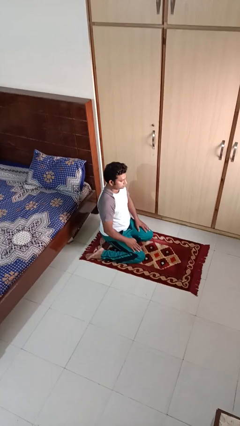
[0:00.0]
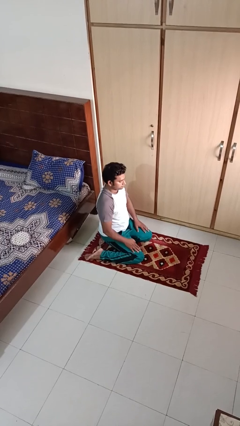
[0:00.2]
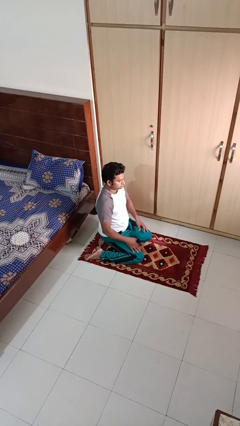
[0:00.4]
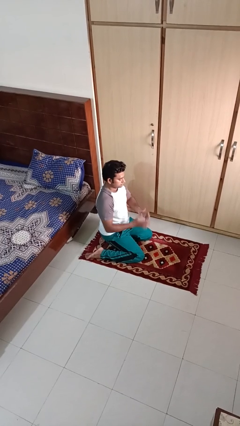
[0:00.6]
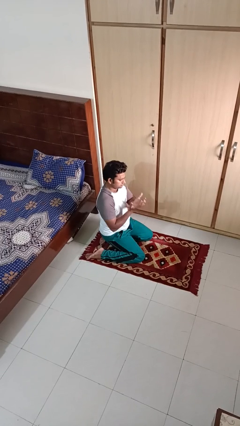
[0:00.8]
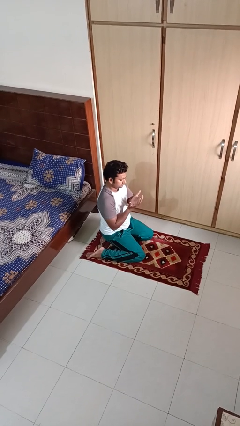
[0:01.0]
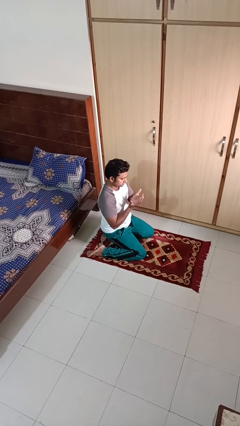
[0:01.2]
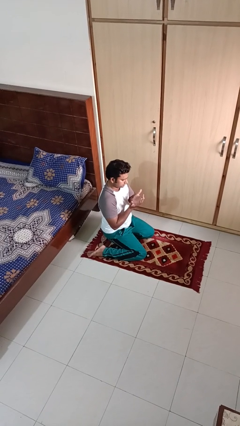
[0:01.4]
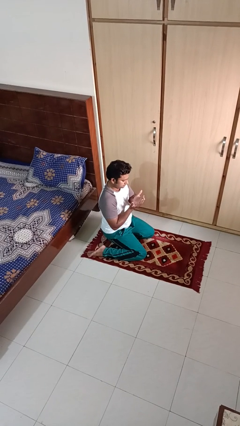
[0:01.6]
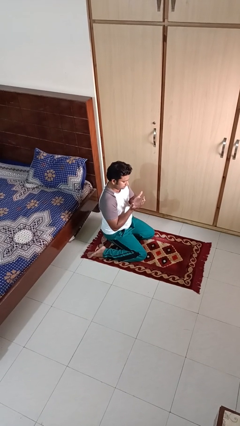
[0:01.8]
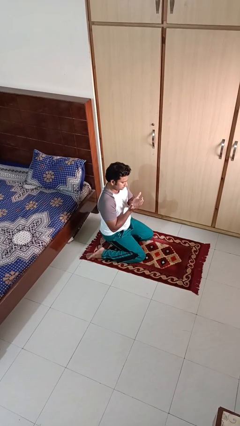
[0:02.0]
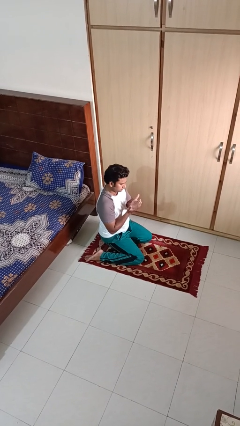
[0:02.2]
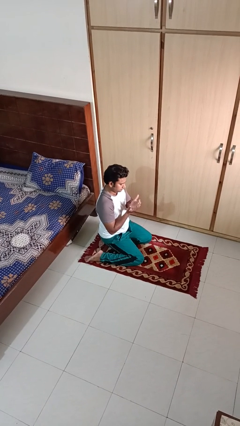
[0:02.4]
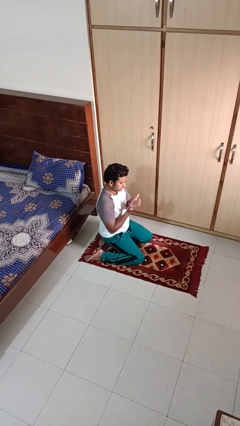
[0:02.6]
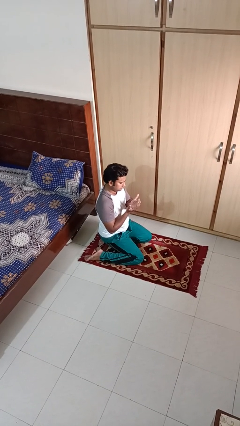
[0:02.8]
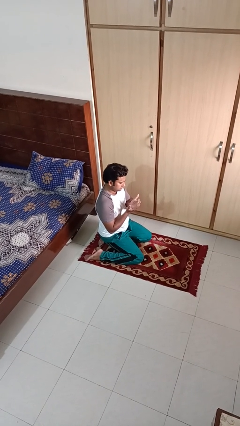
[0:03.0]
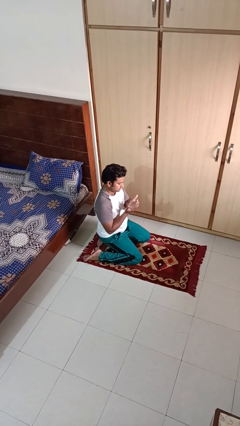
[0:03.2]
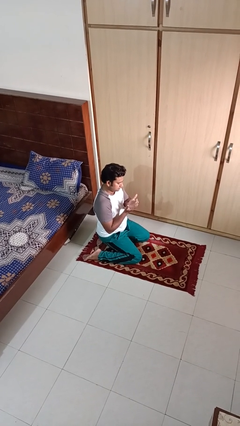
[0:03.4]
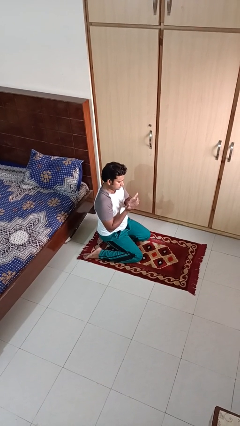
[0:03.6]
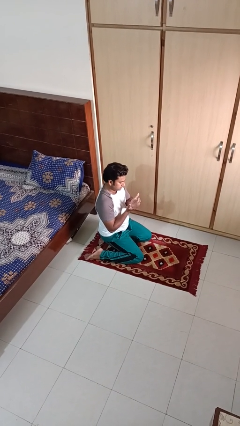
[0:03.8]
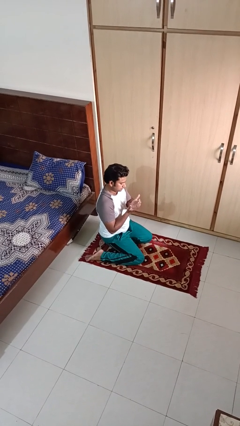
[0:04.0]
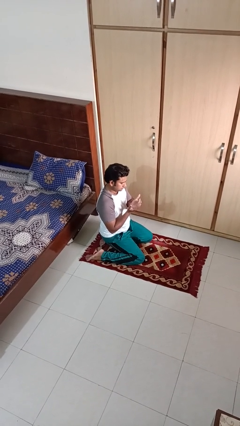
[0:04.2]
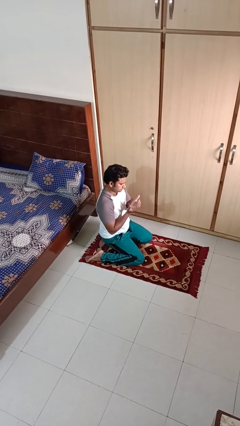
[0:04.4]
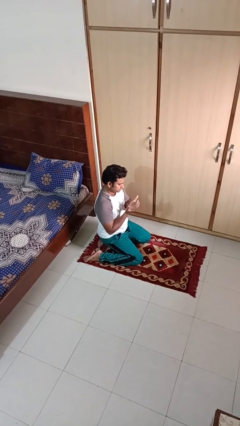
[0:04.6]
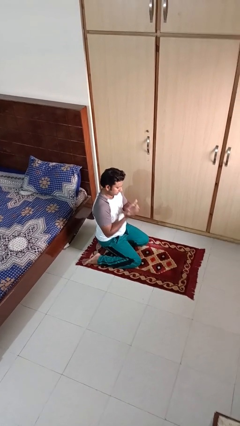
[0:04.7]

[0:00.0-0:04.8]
person prays

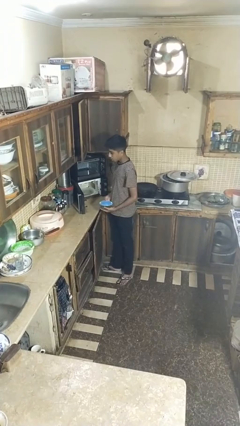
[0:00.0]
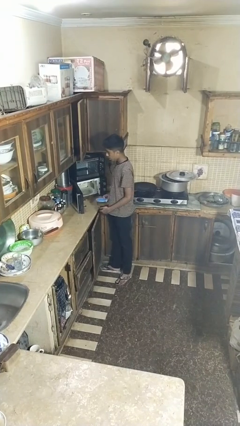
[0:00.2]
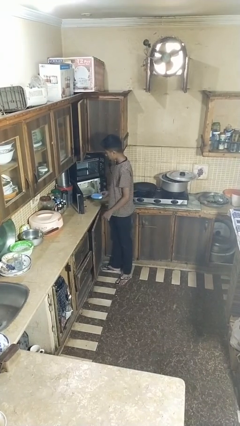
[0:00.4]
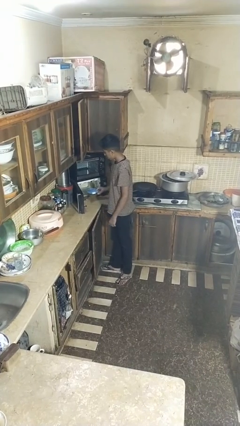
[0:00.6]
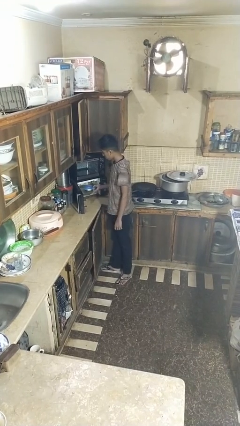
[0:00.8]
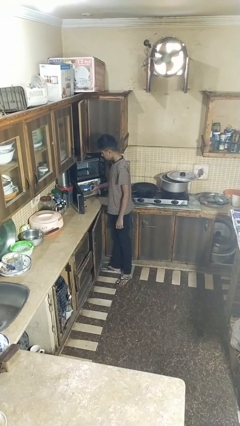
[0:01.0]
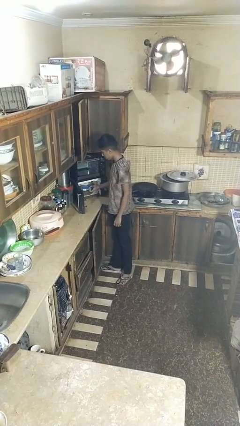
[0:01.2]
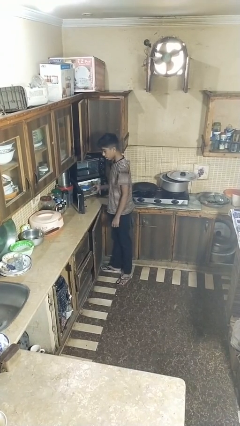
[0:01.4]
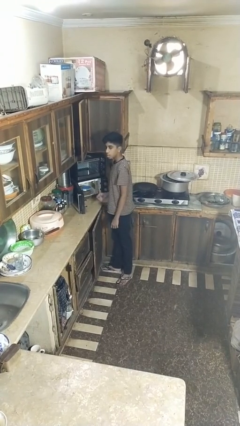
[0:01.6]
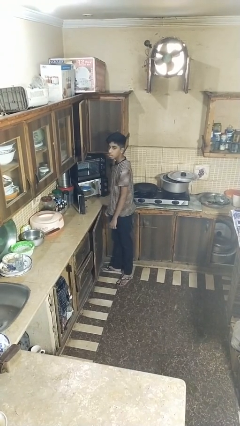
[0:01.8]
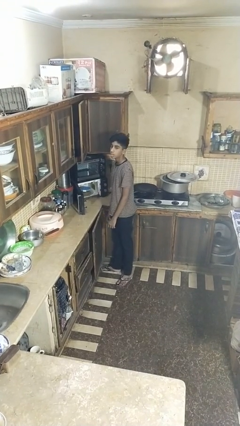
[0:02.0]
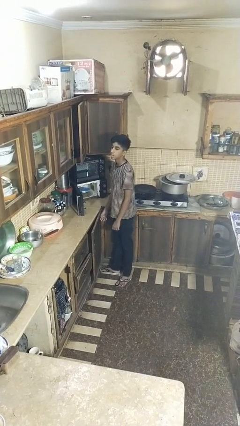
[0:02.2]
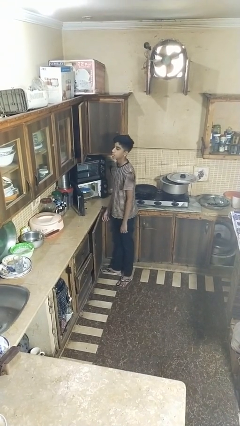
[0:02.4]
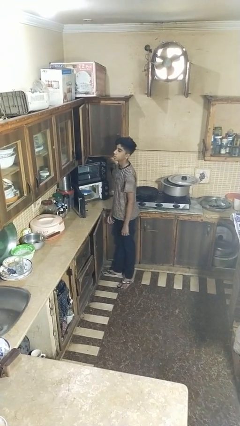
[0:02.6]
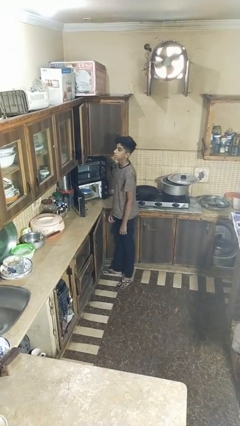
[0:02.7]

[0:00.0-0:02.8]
person puts object into microwave

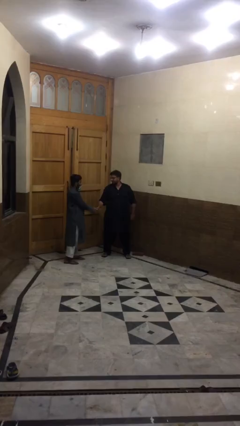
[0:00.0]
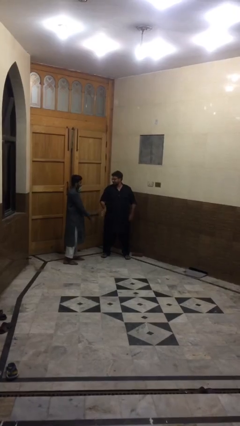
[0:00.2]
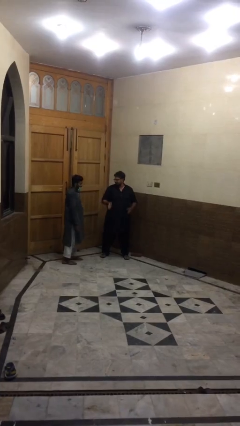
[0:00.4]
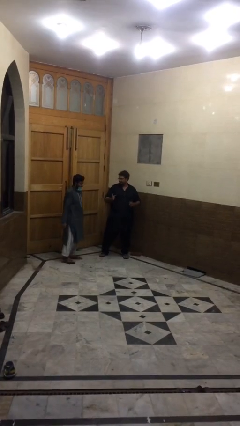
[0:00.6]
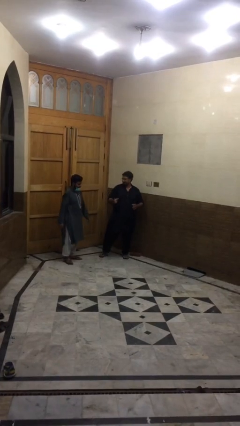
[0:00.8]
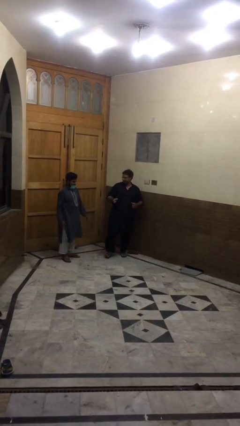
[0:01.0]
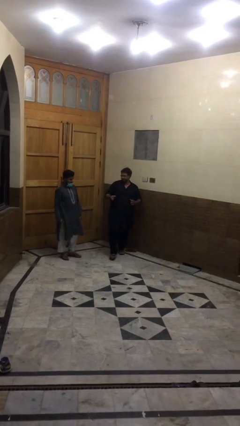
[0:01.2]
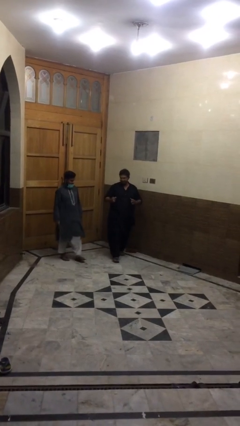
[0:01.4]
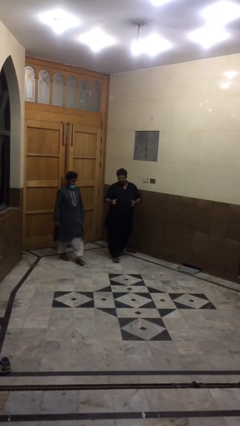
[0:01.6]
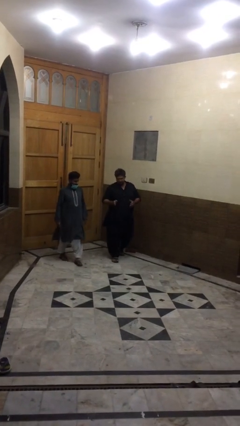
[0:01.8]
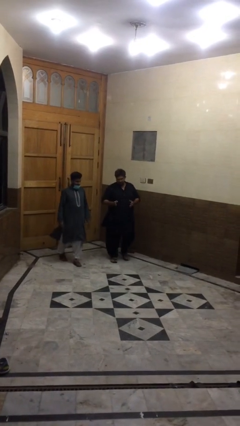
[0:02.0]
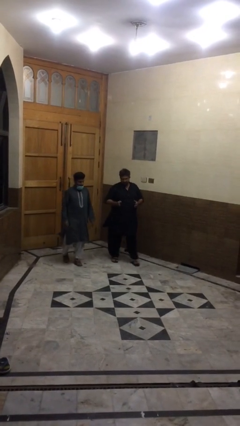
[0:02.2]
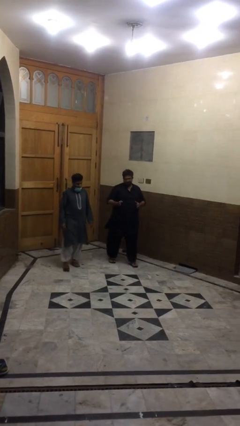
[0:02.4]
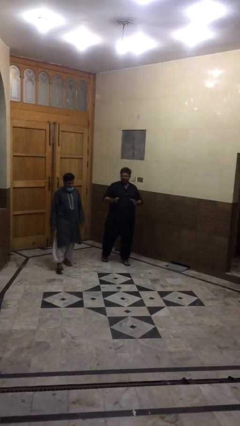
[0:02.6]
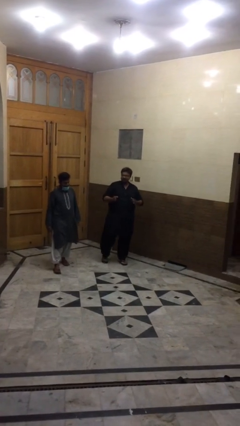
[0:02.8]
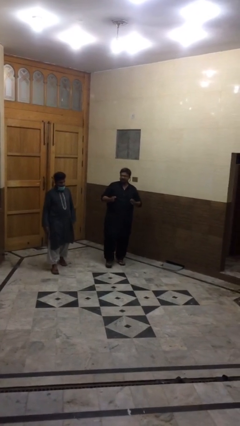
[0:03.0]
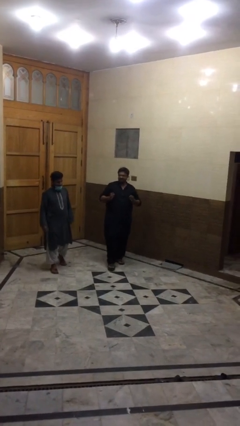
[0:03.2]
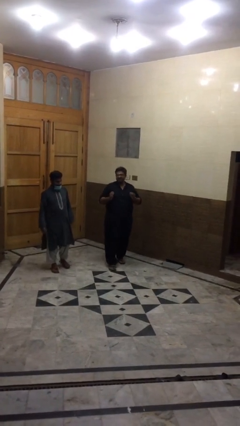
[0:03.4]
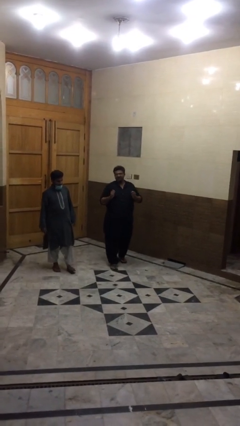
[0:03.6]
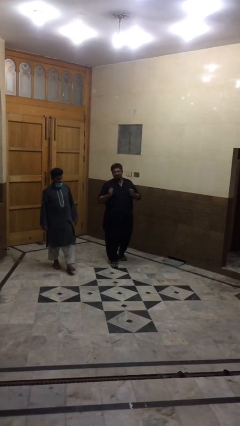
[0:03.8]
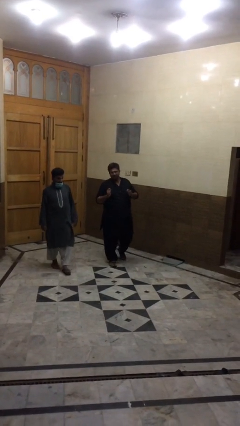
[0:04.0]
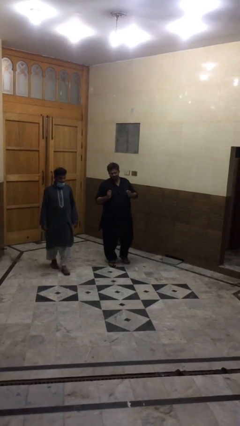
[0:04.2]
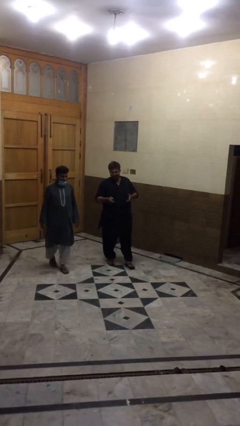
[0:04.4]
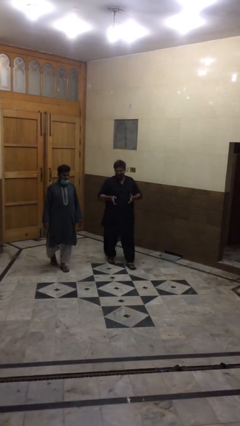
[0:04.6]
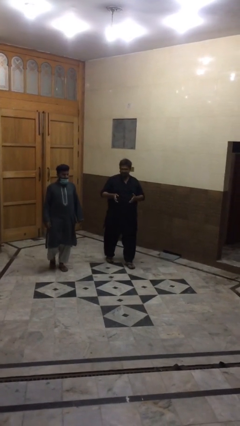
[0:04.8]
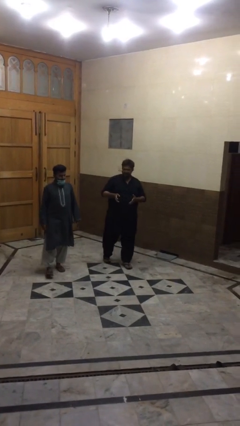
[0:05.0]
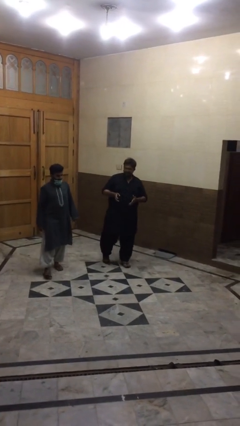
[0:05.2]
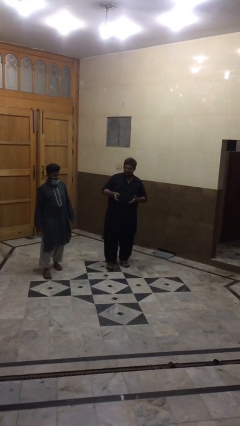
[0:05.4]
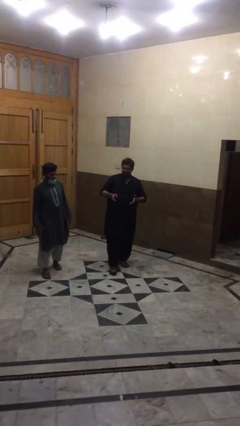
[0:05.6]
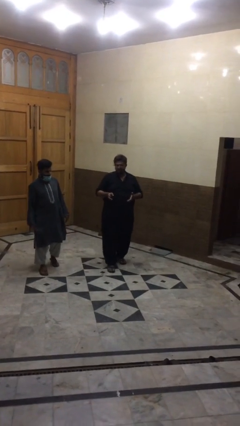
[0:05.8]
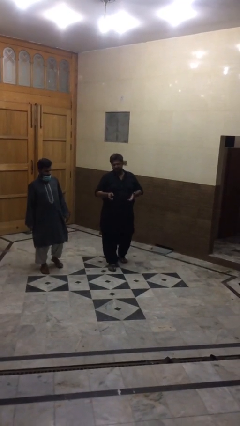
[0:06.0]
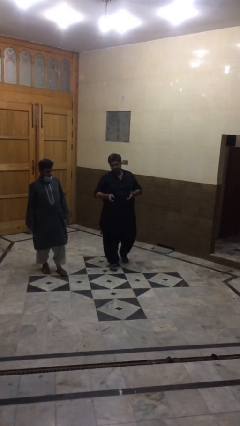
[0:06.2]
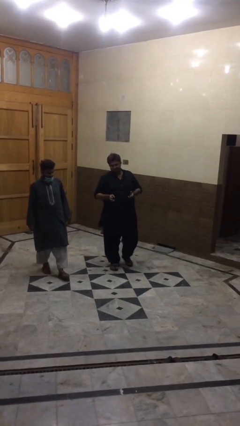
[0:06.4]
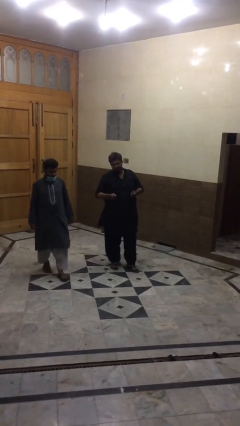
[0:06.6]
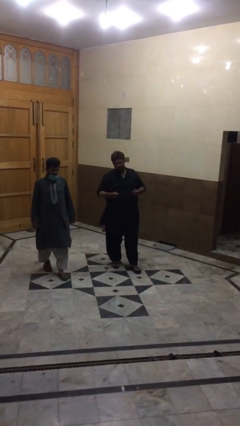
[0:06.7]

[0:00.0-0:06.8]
person talks to person

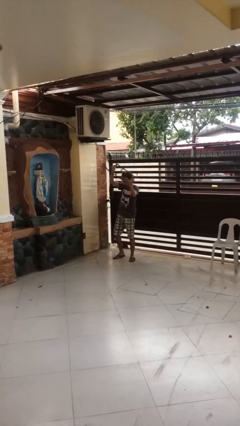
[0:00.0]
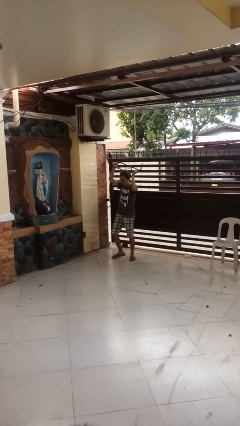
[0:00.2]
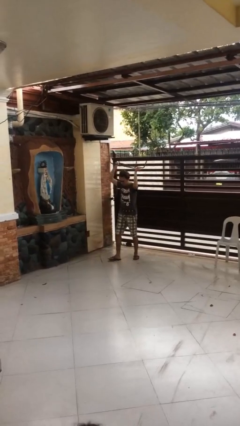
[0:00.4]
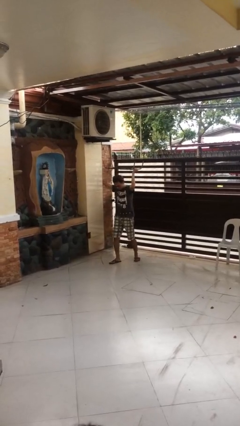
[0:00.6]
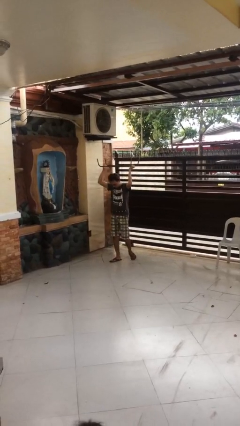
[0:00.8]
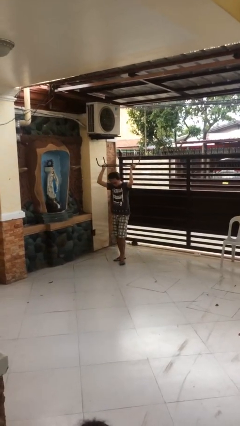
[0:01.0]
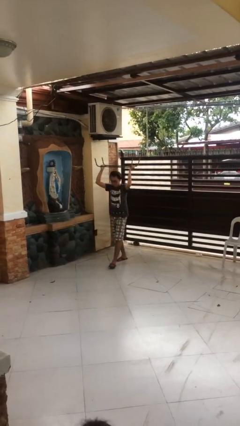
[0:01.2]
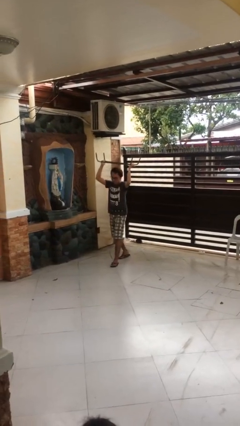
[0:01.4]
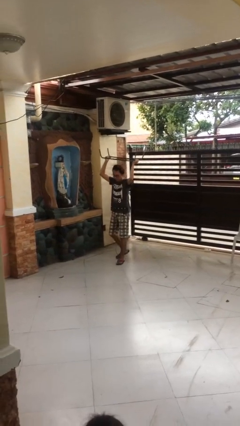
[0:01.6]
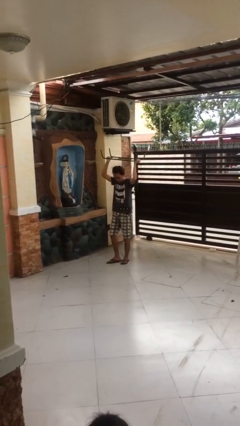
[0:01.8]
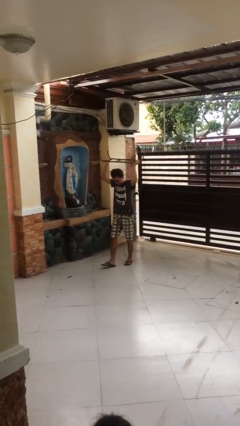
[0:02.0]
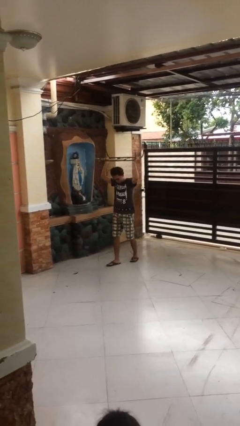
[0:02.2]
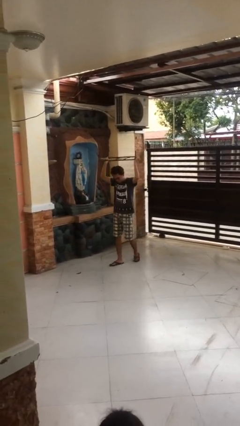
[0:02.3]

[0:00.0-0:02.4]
person carries heavy object

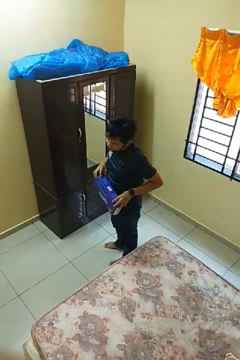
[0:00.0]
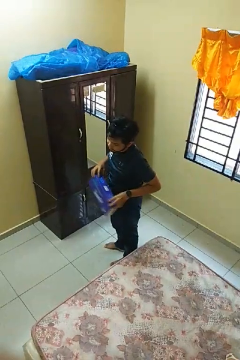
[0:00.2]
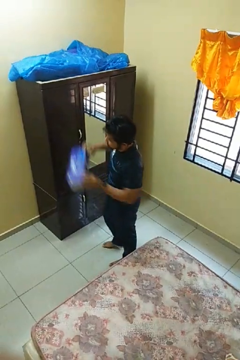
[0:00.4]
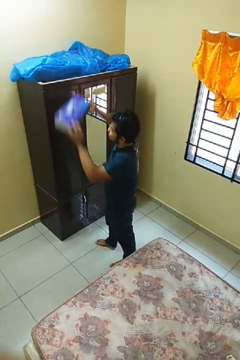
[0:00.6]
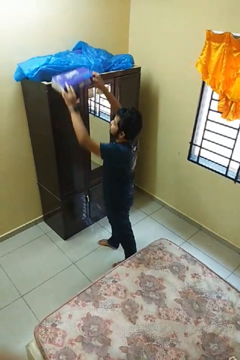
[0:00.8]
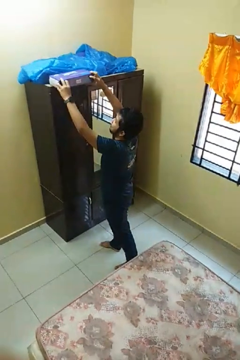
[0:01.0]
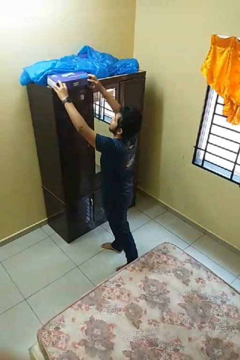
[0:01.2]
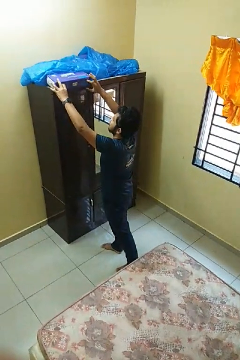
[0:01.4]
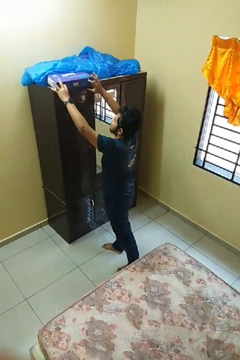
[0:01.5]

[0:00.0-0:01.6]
person puts down object on countertop
